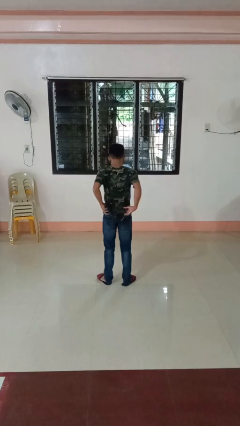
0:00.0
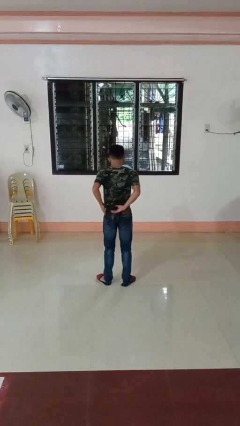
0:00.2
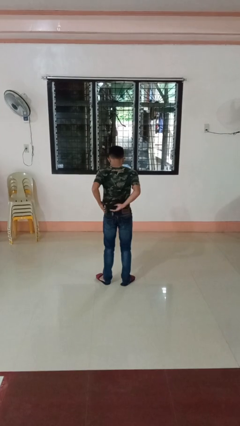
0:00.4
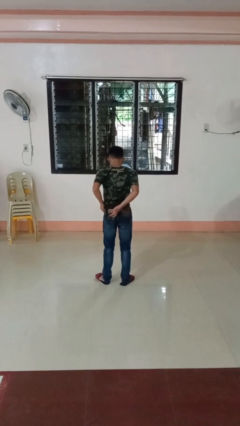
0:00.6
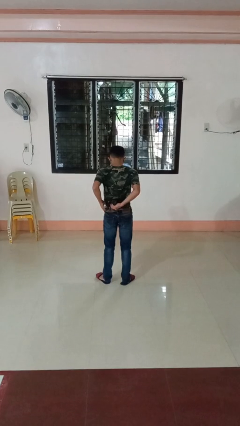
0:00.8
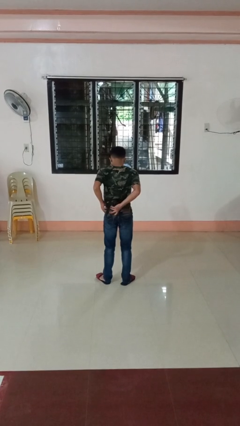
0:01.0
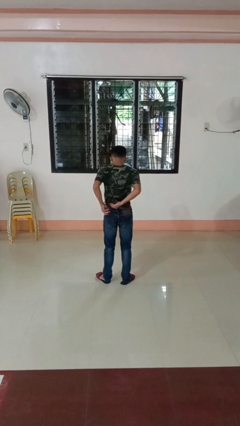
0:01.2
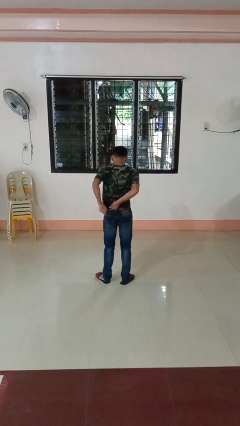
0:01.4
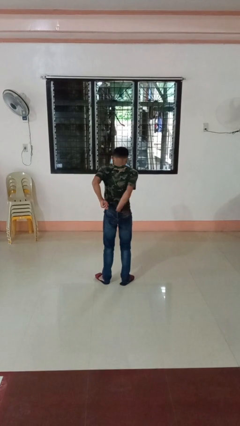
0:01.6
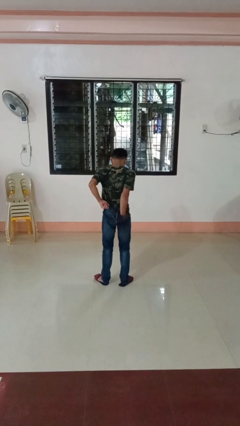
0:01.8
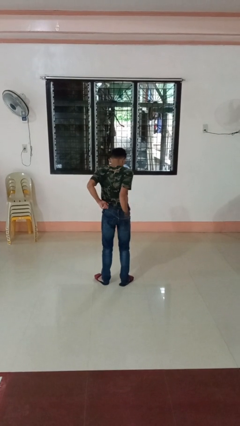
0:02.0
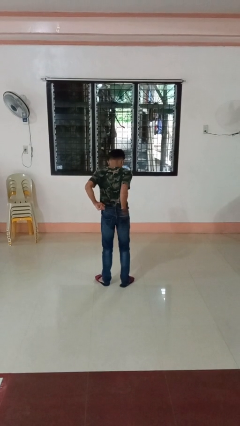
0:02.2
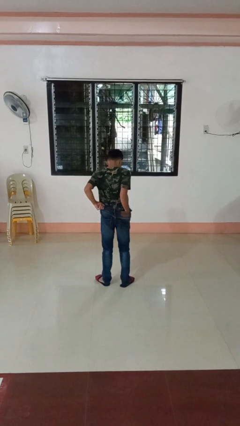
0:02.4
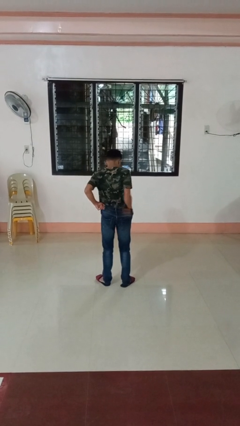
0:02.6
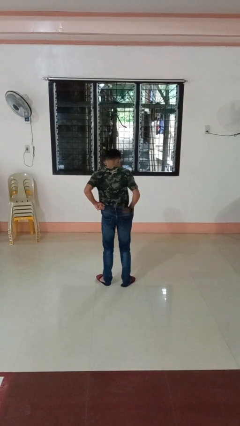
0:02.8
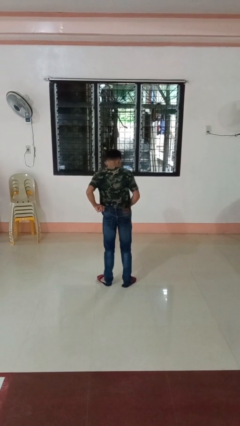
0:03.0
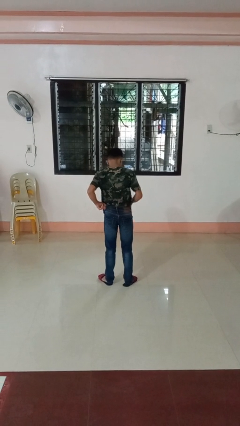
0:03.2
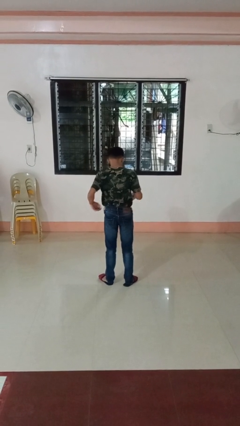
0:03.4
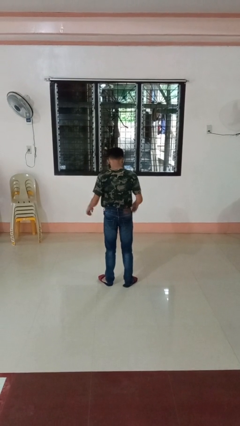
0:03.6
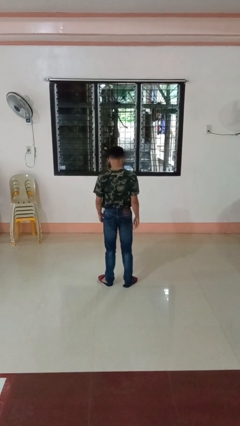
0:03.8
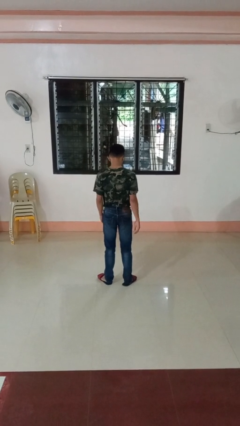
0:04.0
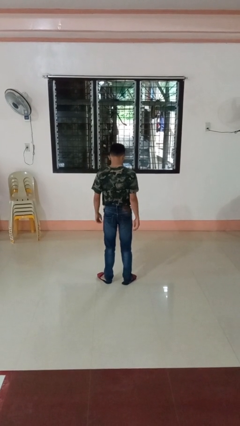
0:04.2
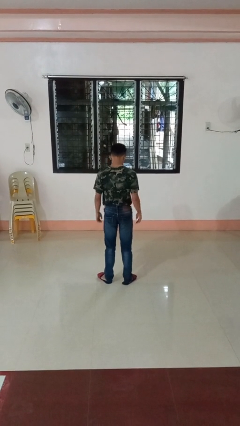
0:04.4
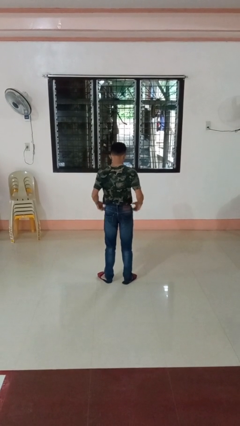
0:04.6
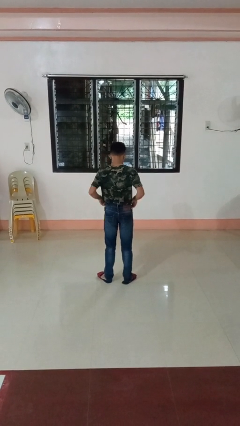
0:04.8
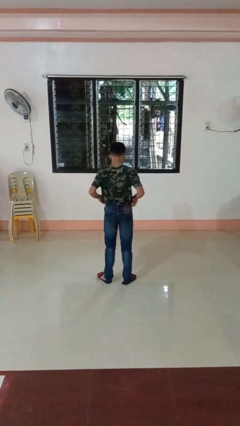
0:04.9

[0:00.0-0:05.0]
person tucks in shirt

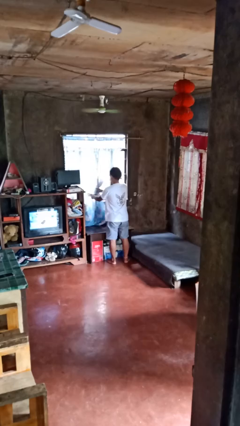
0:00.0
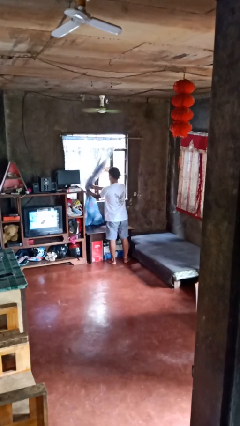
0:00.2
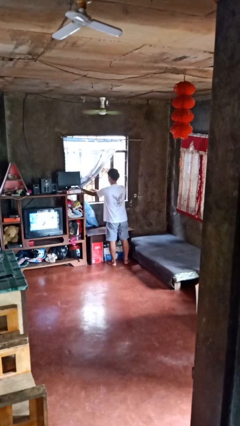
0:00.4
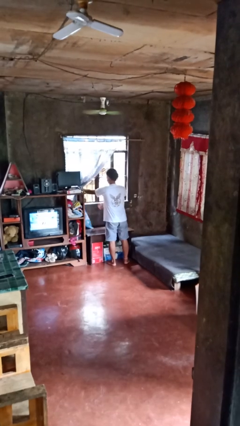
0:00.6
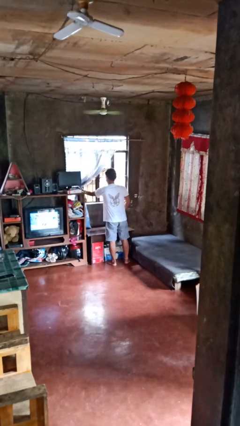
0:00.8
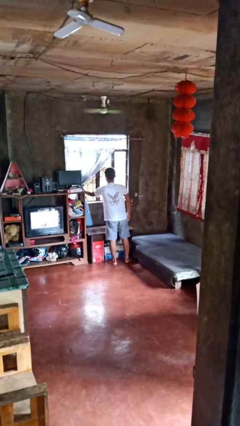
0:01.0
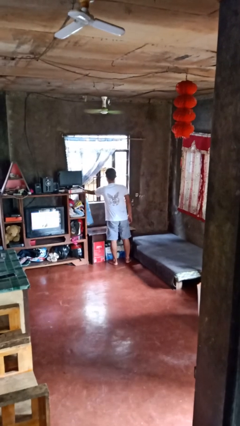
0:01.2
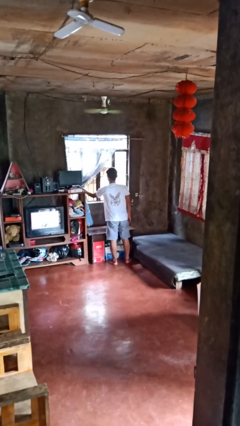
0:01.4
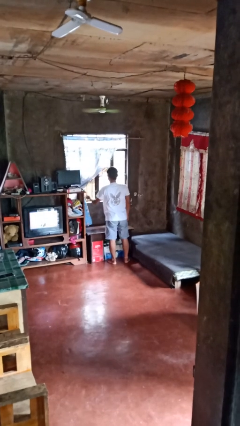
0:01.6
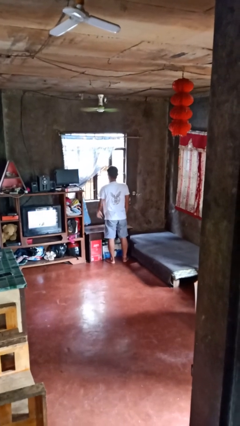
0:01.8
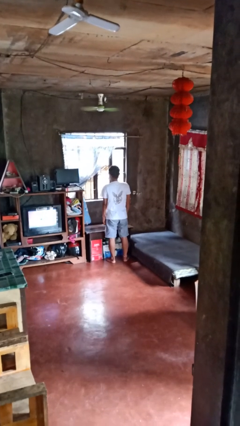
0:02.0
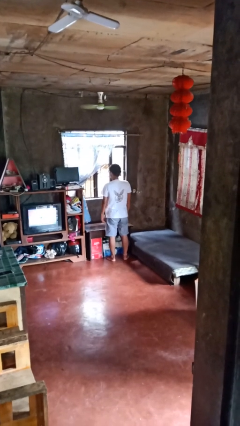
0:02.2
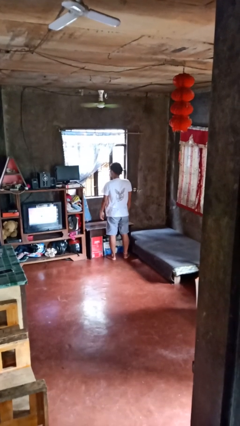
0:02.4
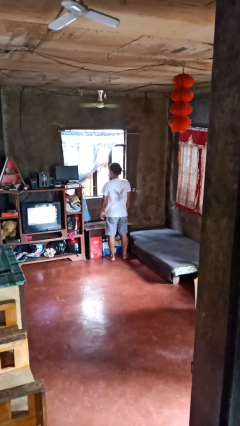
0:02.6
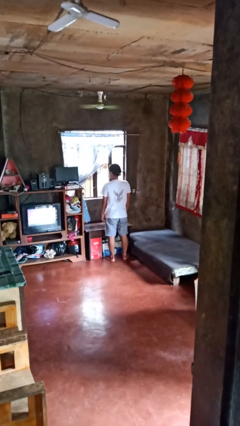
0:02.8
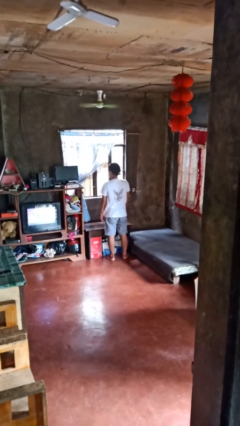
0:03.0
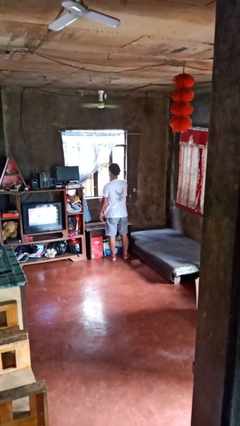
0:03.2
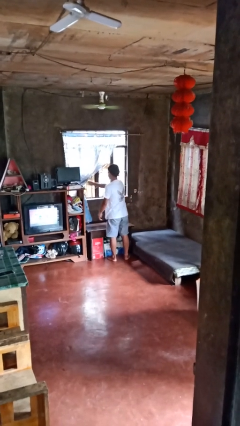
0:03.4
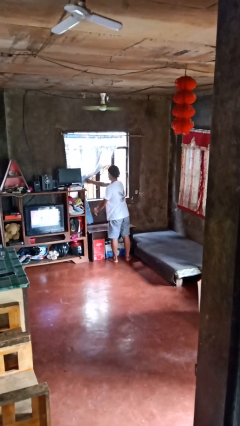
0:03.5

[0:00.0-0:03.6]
person opens curtains

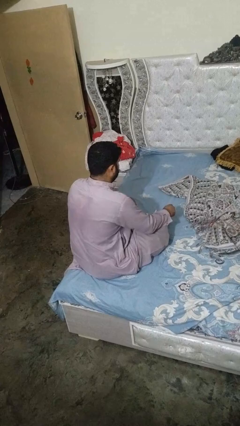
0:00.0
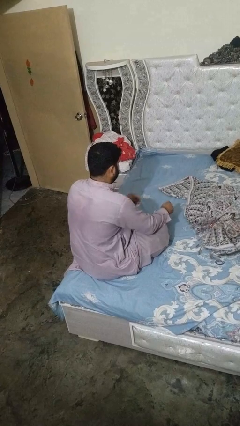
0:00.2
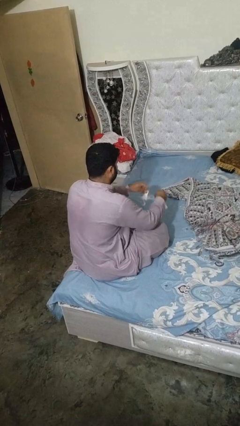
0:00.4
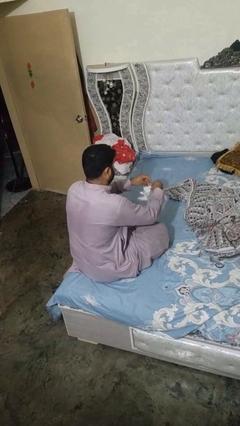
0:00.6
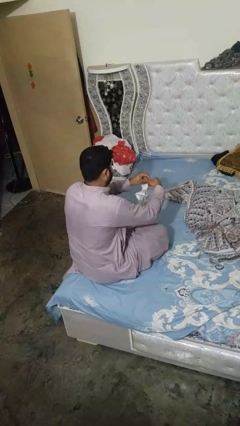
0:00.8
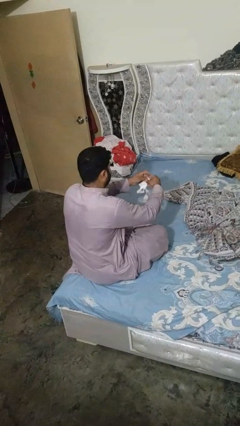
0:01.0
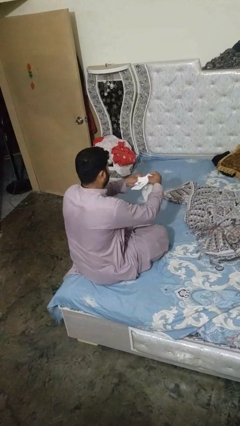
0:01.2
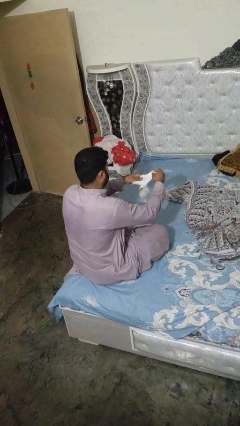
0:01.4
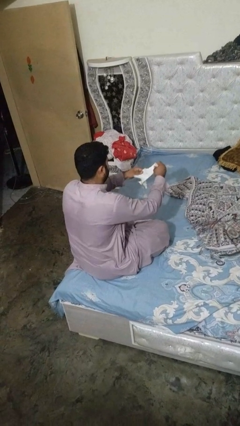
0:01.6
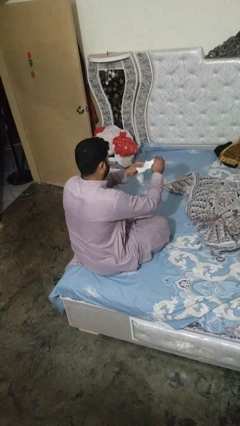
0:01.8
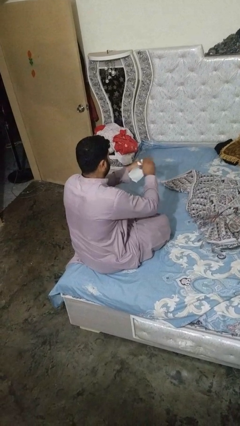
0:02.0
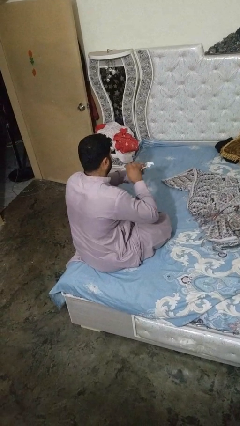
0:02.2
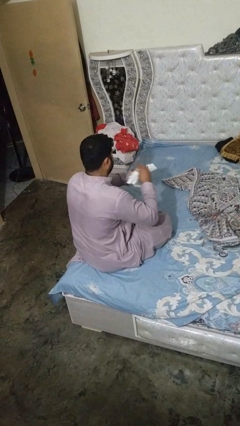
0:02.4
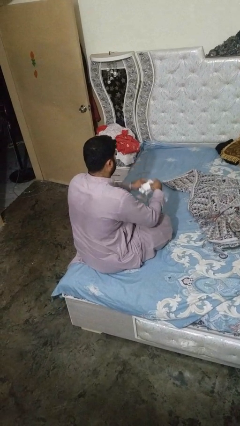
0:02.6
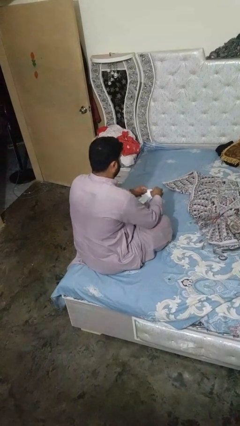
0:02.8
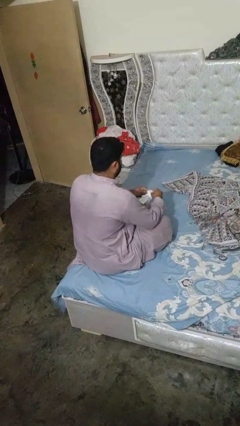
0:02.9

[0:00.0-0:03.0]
person tears paper

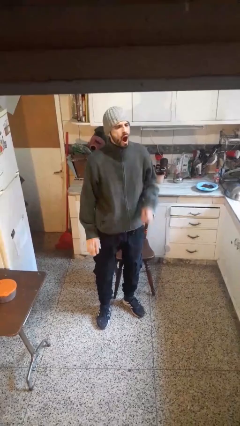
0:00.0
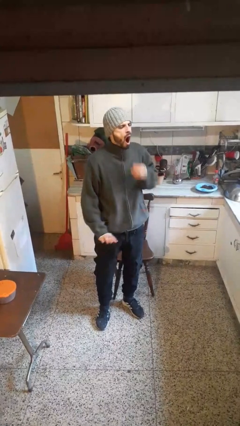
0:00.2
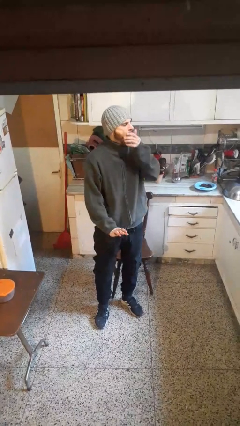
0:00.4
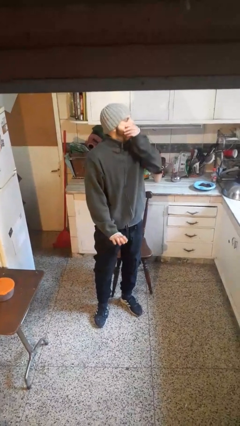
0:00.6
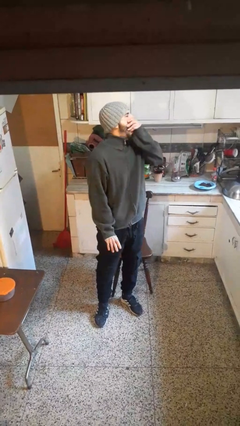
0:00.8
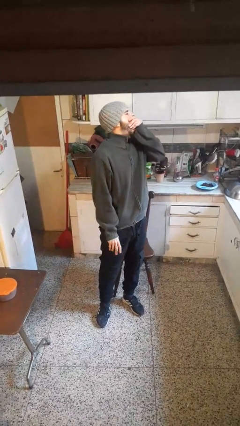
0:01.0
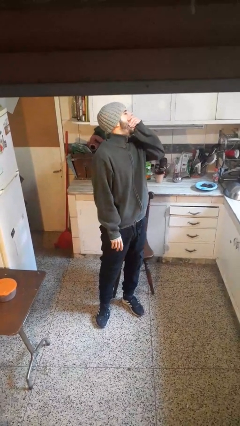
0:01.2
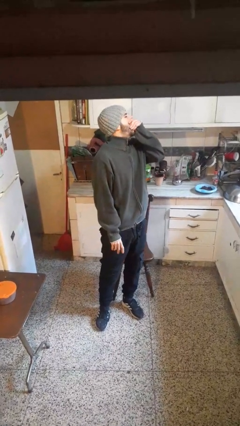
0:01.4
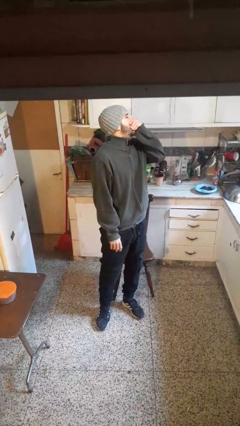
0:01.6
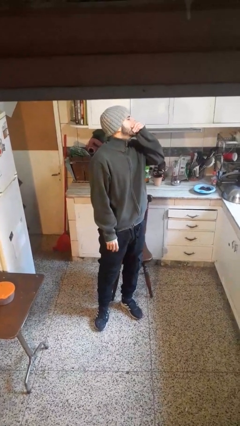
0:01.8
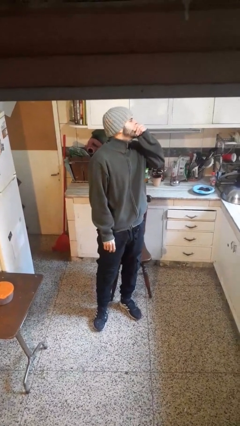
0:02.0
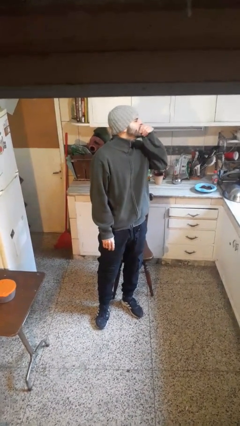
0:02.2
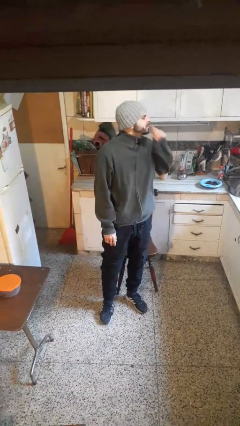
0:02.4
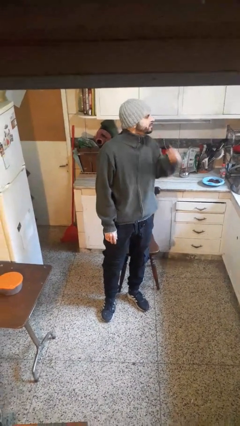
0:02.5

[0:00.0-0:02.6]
person yawns

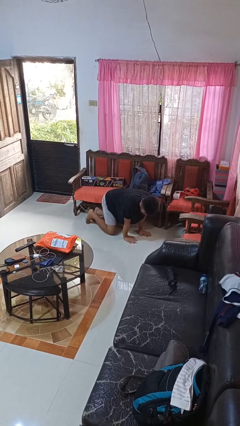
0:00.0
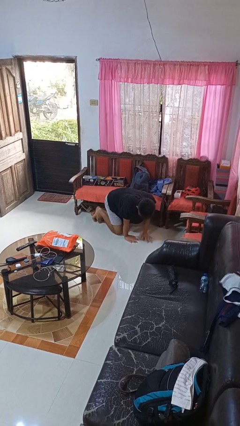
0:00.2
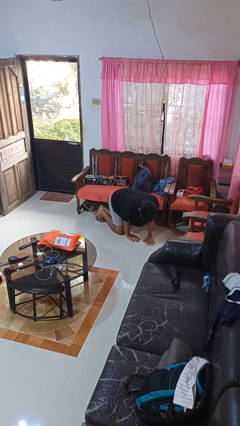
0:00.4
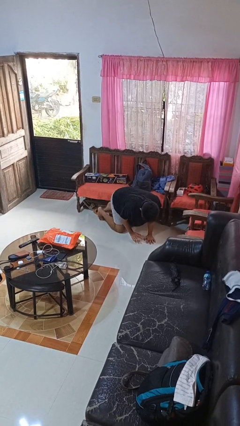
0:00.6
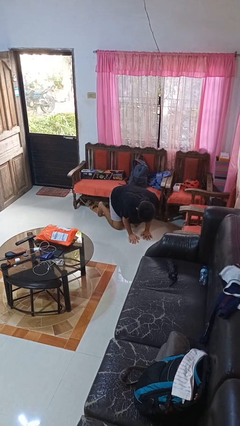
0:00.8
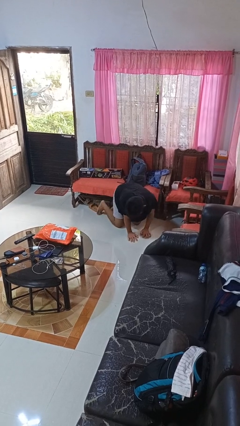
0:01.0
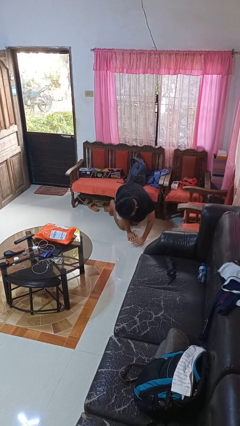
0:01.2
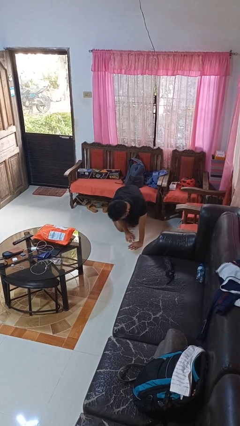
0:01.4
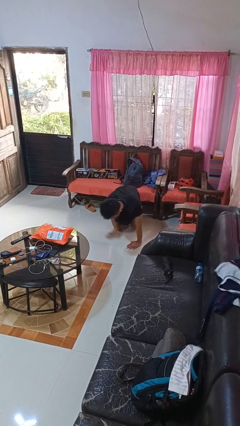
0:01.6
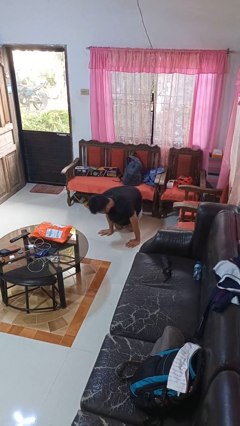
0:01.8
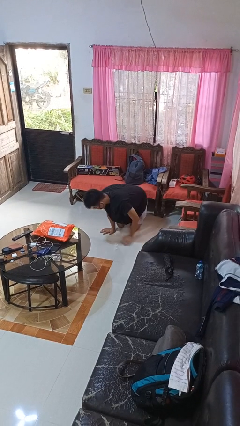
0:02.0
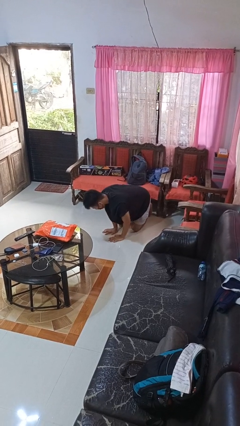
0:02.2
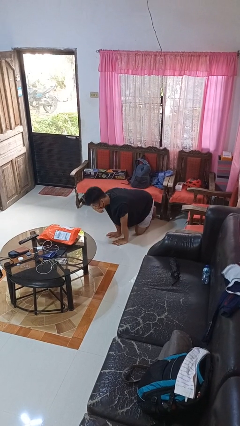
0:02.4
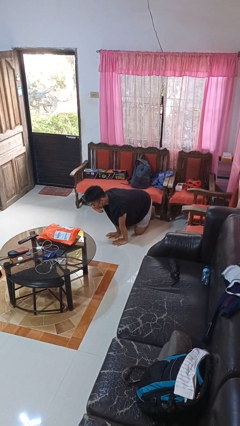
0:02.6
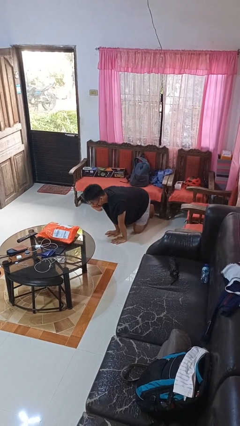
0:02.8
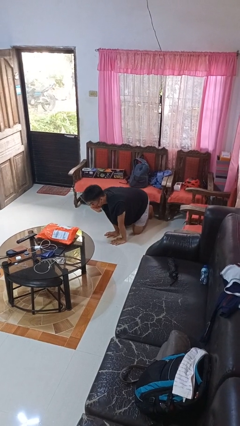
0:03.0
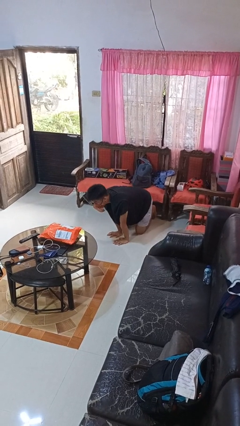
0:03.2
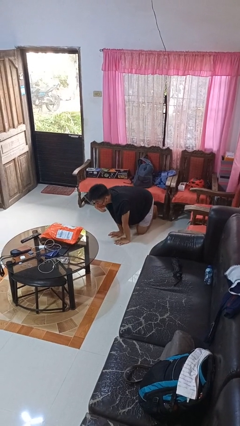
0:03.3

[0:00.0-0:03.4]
person crawls

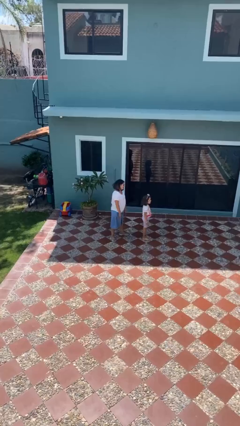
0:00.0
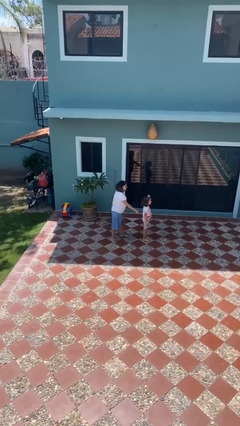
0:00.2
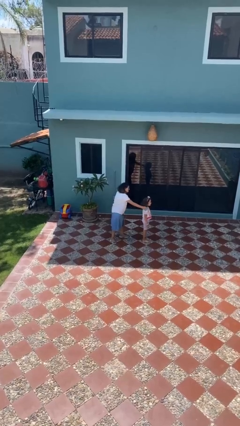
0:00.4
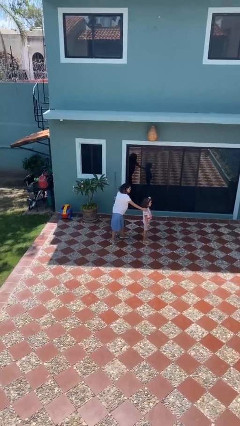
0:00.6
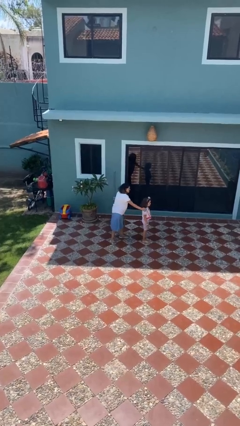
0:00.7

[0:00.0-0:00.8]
person grabs person by shoulder
